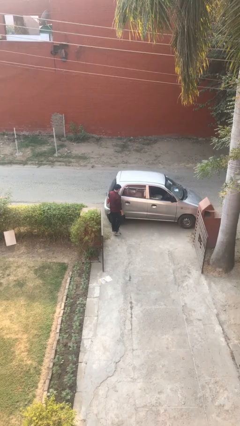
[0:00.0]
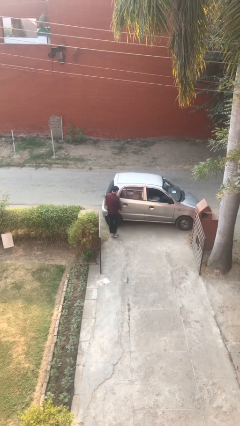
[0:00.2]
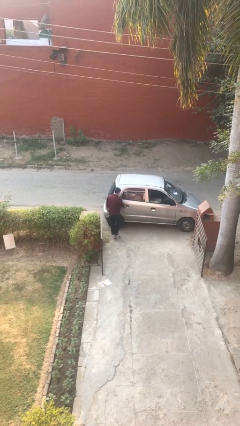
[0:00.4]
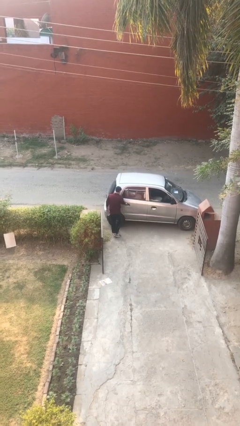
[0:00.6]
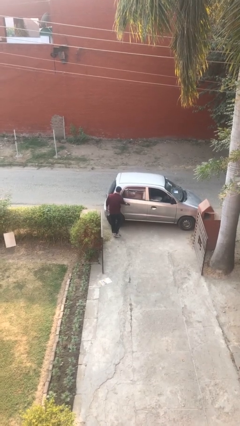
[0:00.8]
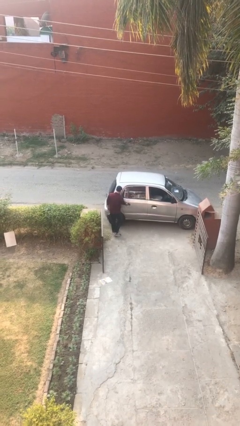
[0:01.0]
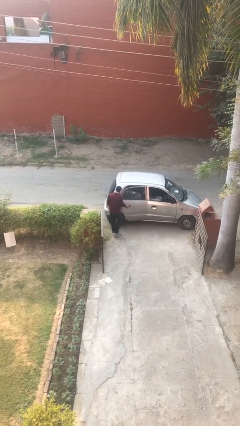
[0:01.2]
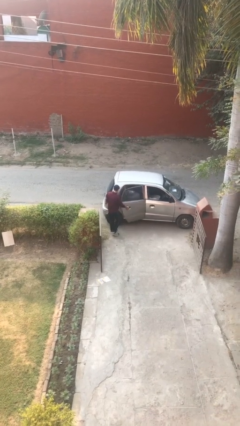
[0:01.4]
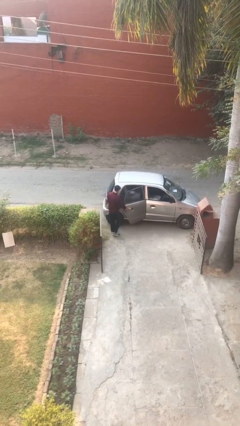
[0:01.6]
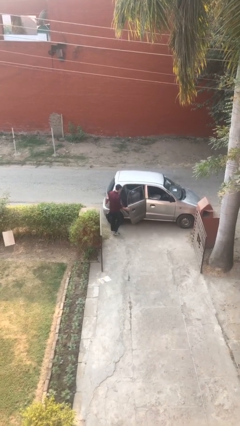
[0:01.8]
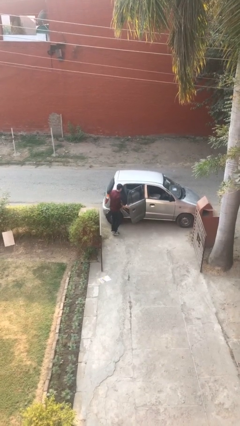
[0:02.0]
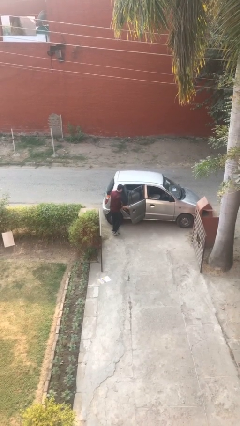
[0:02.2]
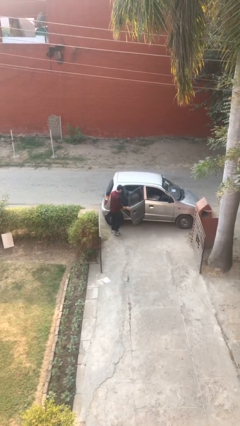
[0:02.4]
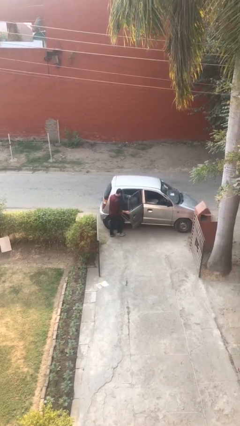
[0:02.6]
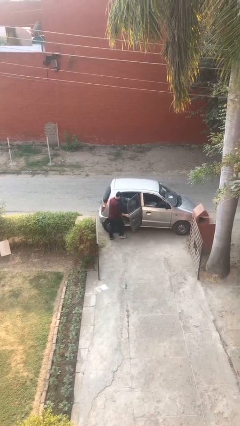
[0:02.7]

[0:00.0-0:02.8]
person opens car door

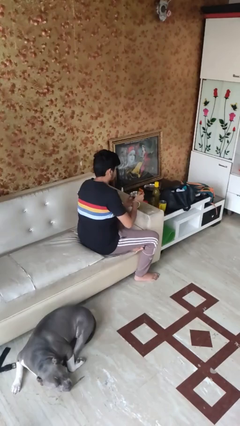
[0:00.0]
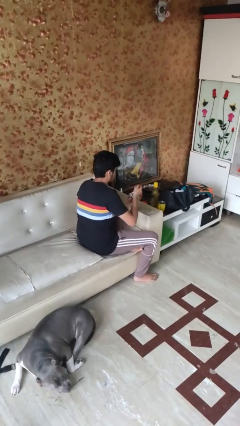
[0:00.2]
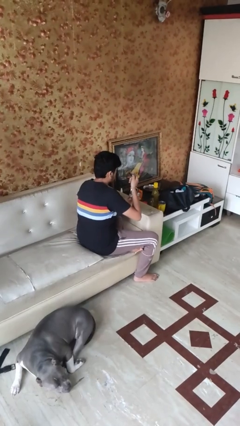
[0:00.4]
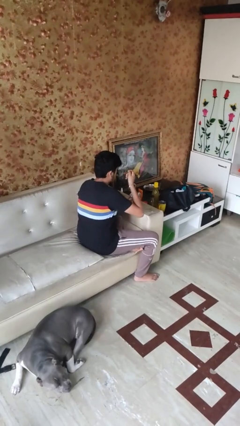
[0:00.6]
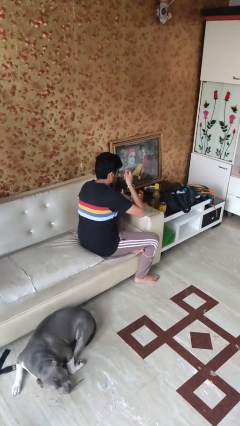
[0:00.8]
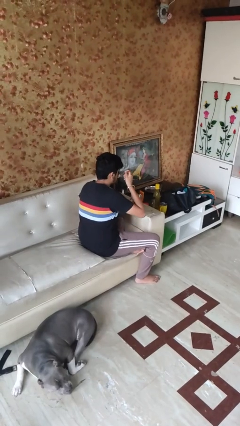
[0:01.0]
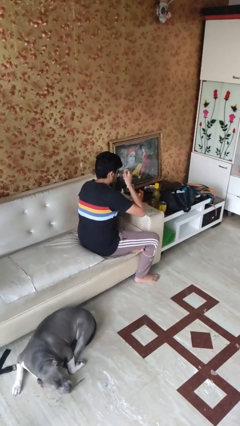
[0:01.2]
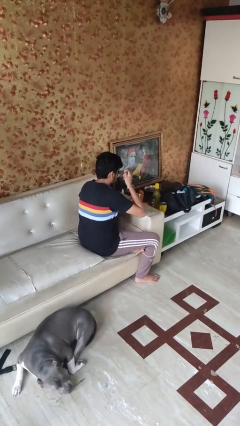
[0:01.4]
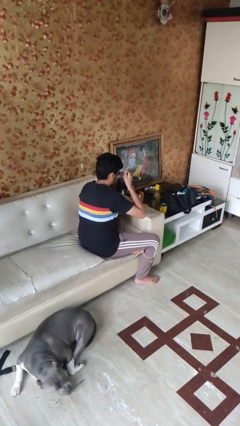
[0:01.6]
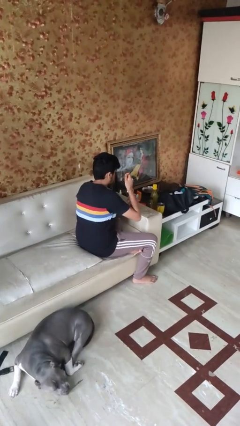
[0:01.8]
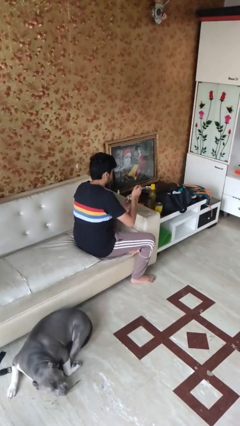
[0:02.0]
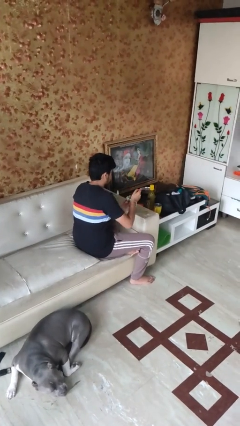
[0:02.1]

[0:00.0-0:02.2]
person eats with utensil

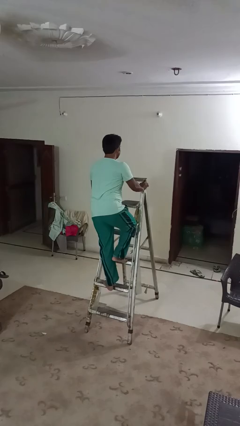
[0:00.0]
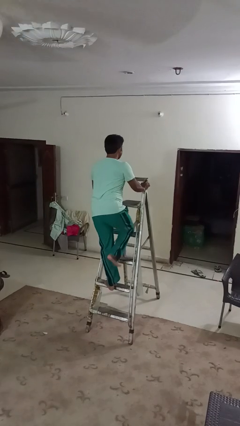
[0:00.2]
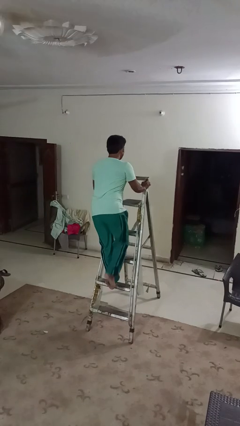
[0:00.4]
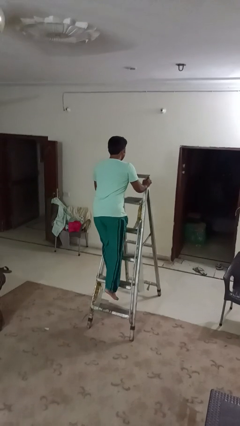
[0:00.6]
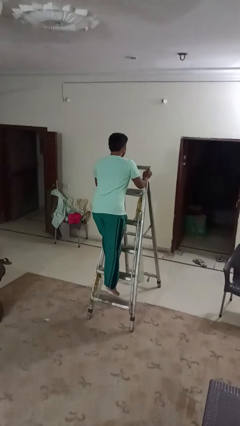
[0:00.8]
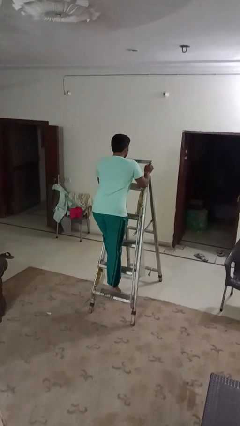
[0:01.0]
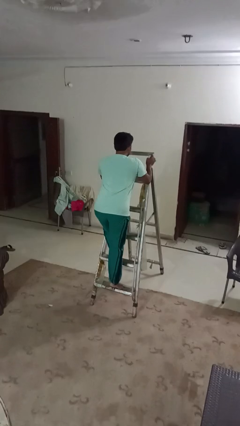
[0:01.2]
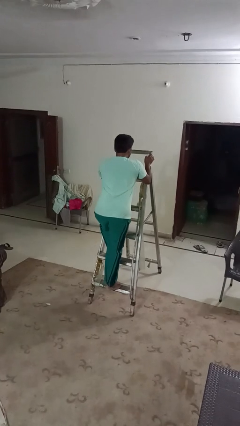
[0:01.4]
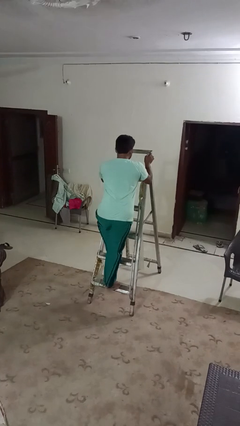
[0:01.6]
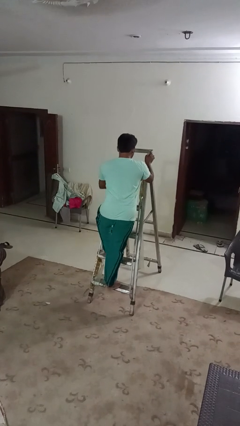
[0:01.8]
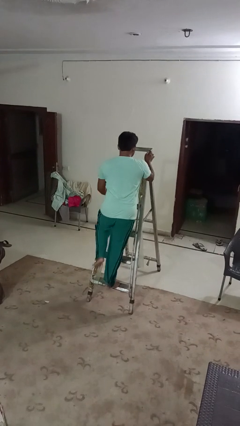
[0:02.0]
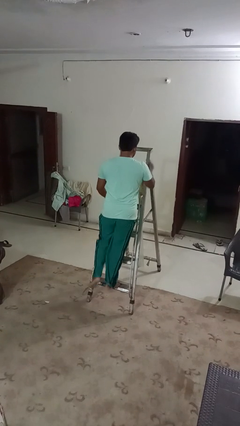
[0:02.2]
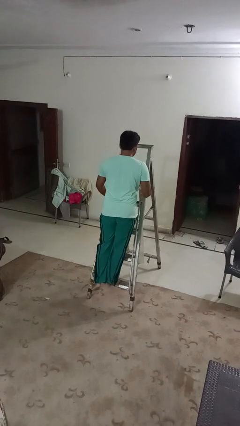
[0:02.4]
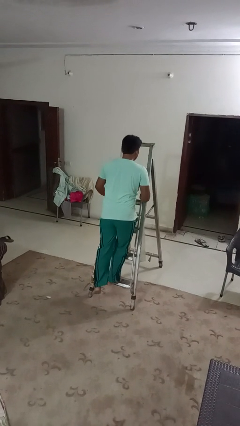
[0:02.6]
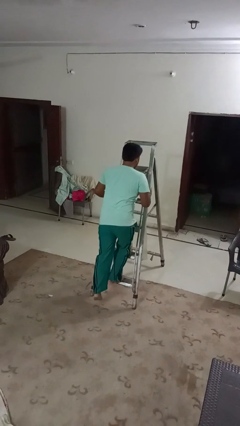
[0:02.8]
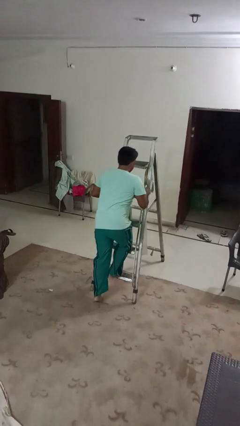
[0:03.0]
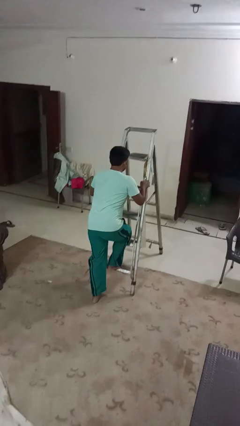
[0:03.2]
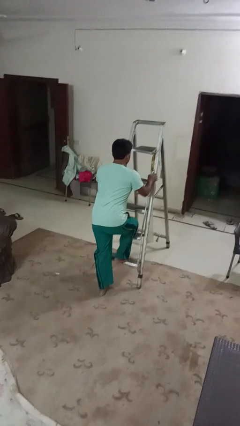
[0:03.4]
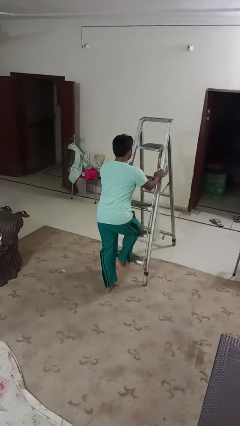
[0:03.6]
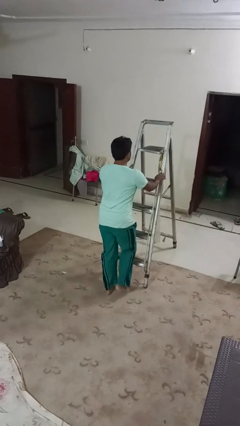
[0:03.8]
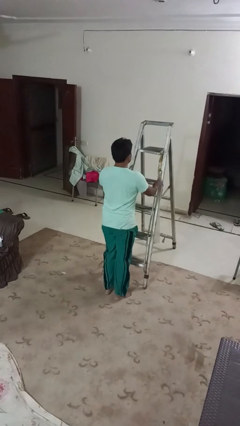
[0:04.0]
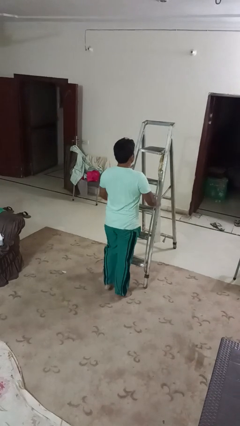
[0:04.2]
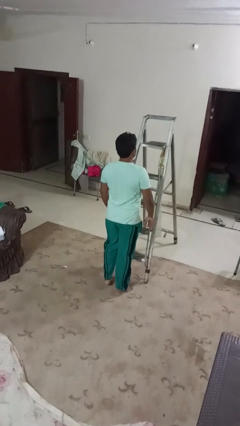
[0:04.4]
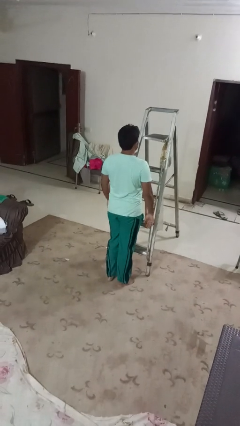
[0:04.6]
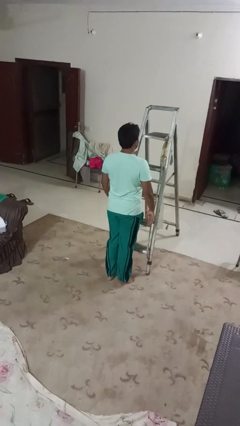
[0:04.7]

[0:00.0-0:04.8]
person climbs down ladder

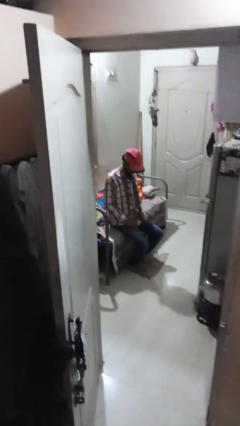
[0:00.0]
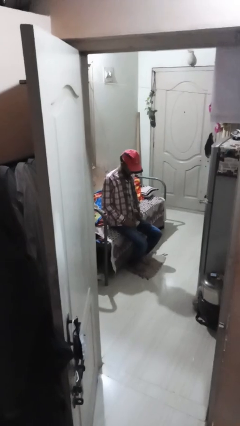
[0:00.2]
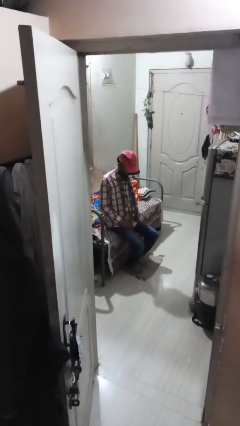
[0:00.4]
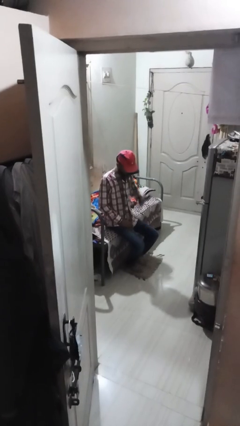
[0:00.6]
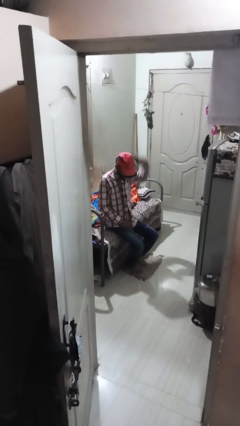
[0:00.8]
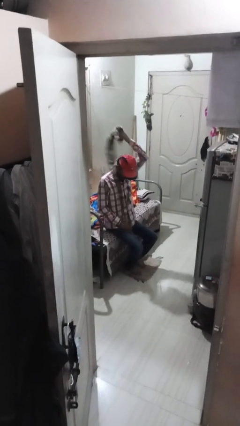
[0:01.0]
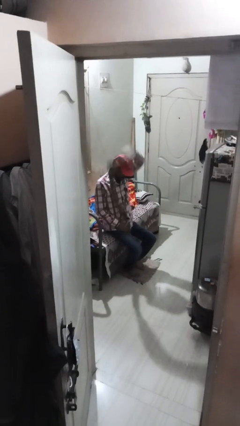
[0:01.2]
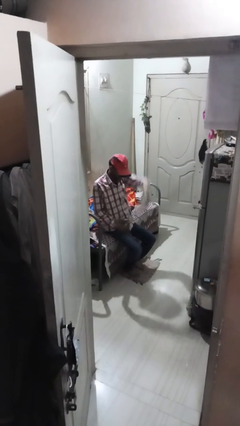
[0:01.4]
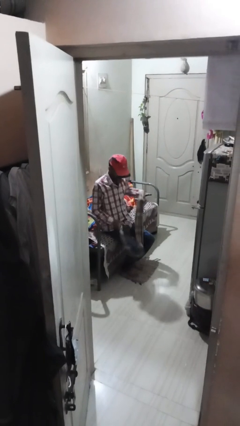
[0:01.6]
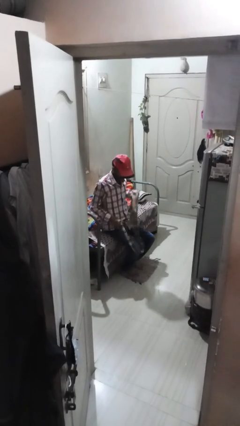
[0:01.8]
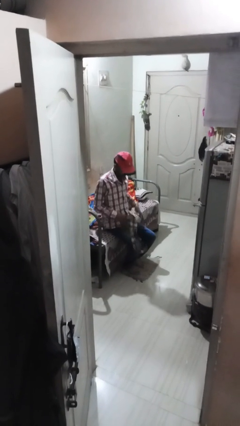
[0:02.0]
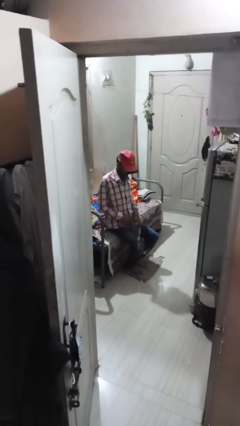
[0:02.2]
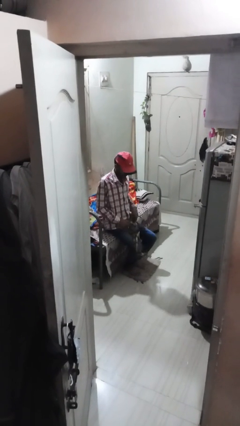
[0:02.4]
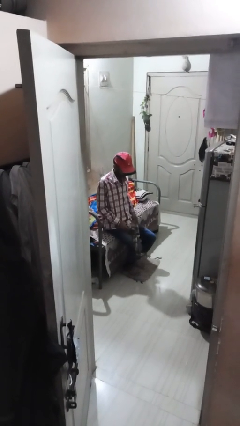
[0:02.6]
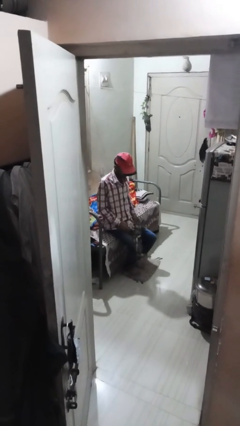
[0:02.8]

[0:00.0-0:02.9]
person takes off scarf

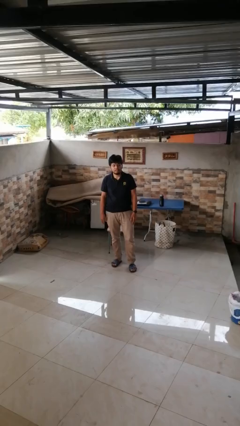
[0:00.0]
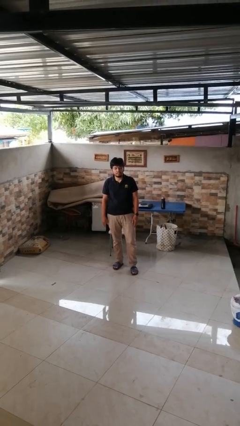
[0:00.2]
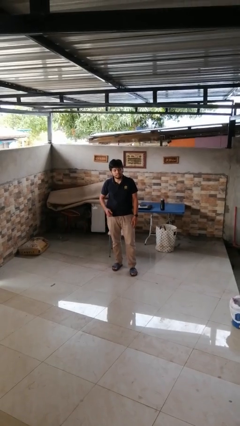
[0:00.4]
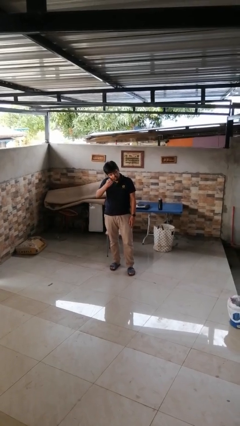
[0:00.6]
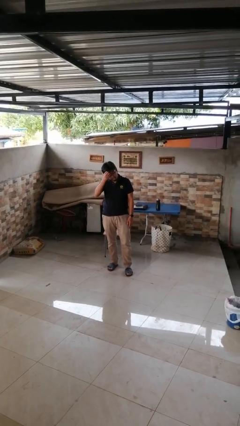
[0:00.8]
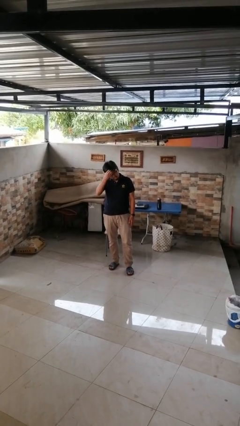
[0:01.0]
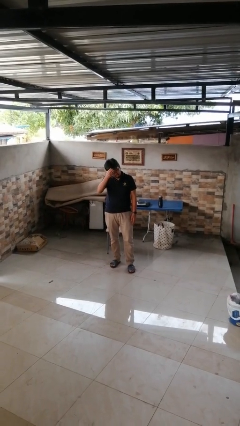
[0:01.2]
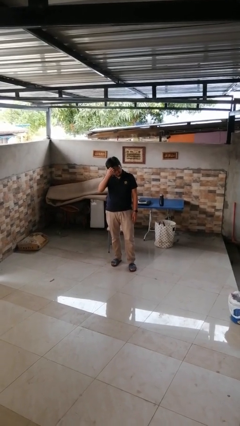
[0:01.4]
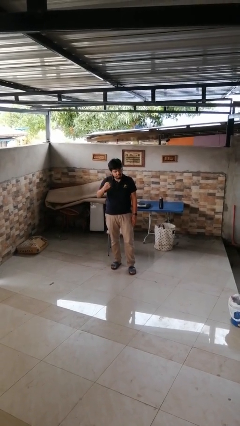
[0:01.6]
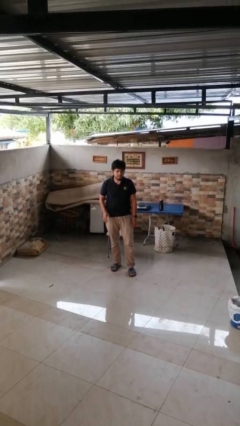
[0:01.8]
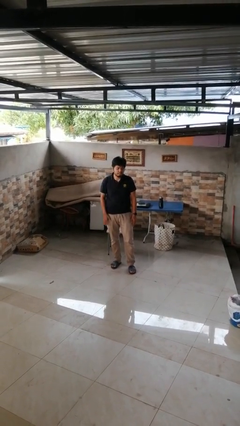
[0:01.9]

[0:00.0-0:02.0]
person scratches face

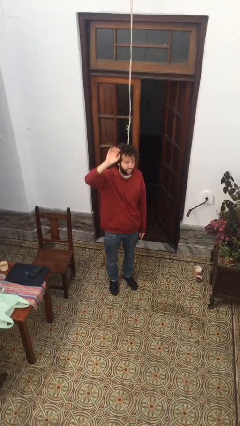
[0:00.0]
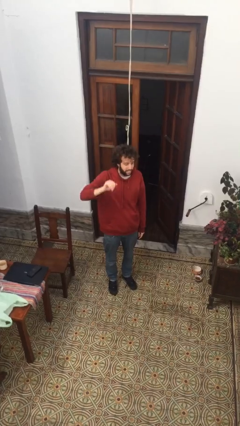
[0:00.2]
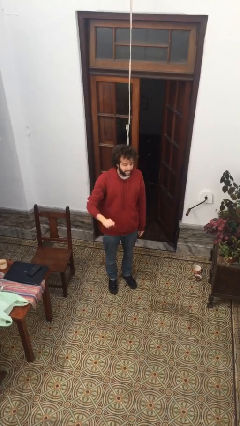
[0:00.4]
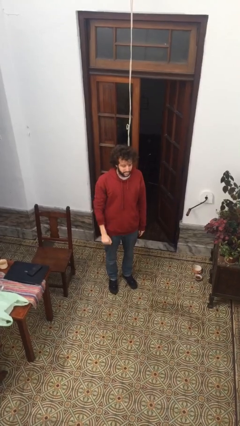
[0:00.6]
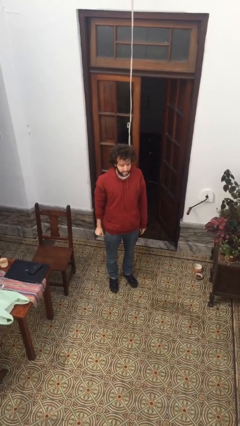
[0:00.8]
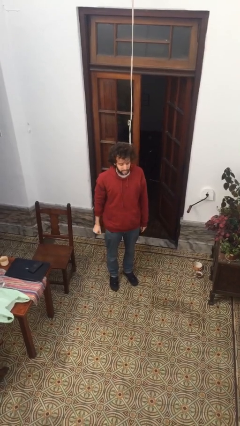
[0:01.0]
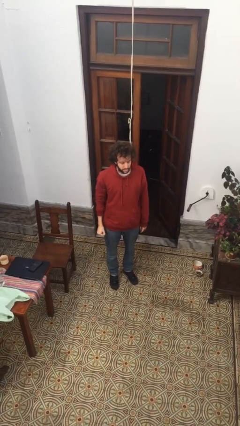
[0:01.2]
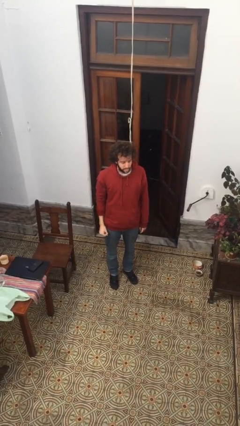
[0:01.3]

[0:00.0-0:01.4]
person gestures lower hand

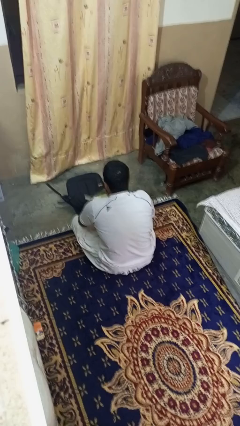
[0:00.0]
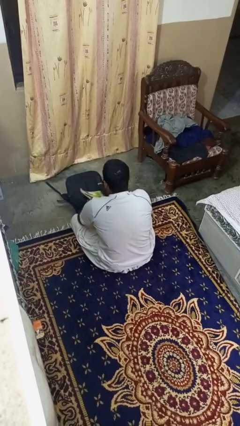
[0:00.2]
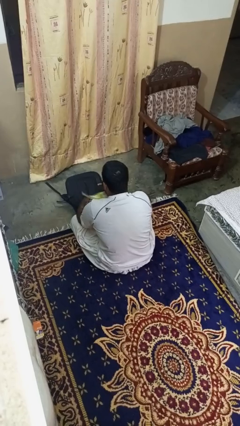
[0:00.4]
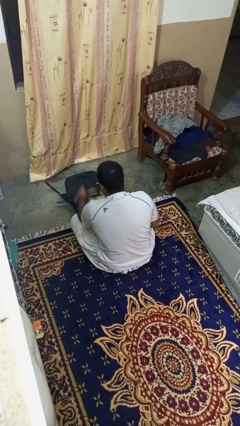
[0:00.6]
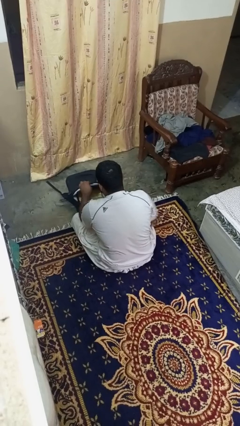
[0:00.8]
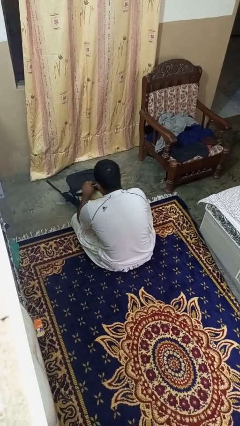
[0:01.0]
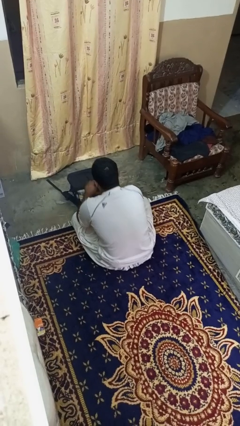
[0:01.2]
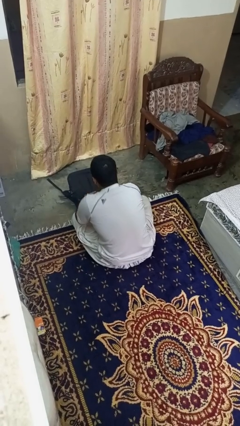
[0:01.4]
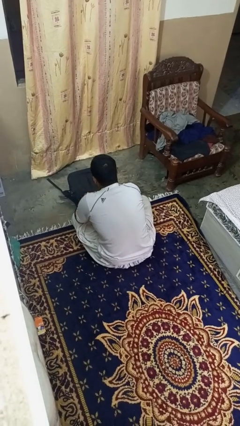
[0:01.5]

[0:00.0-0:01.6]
person puts object into bag
